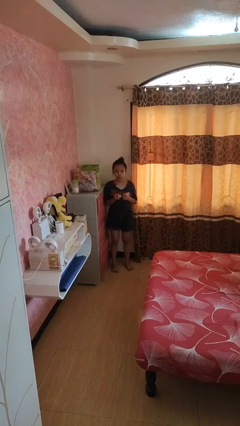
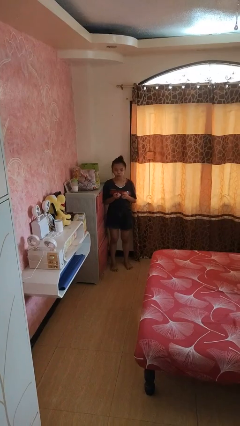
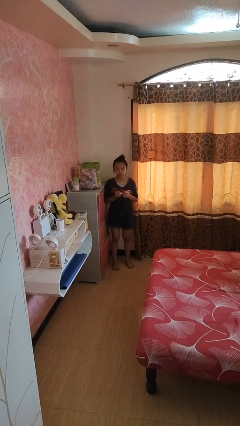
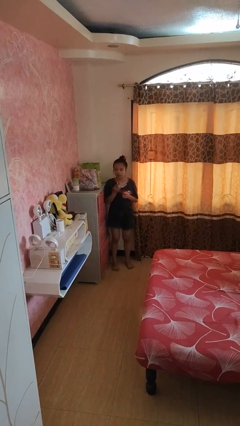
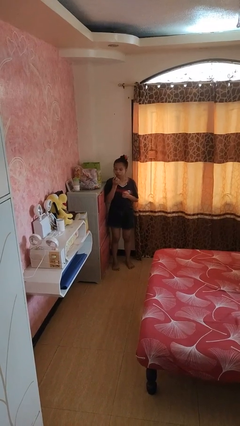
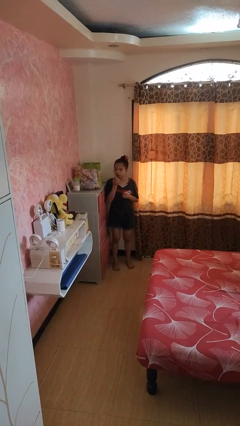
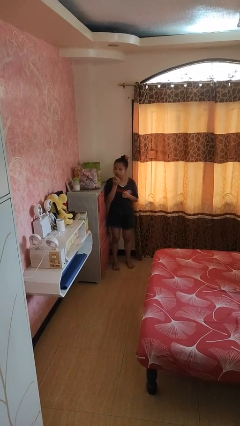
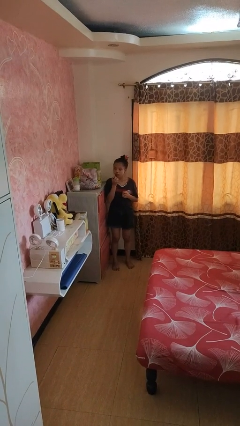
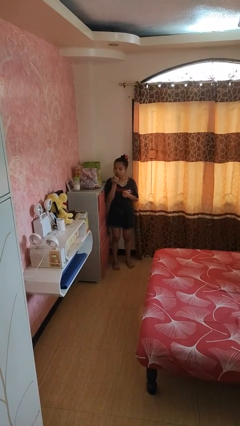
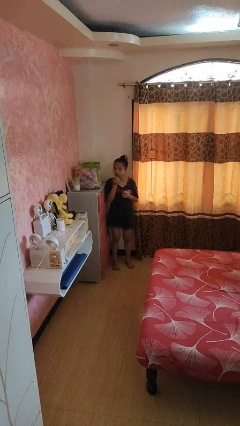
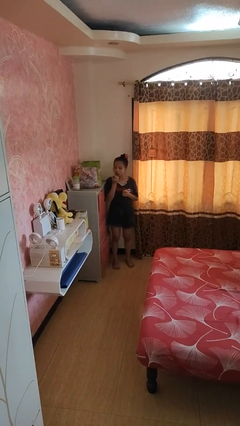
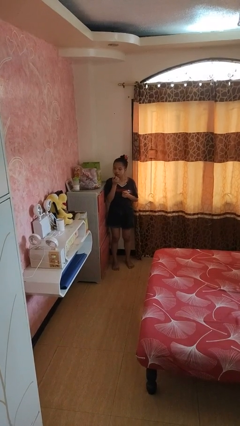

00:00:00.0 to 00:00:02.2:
person applies lip makeup

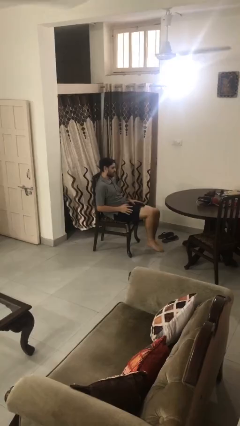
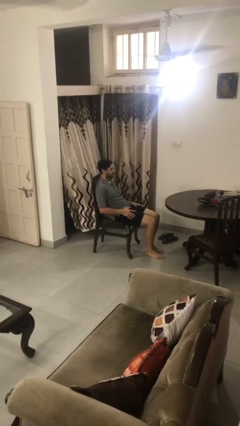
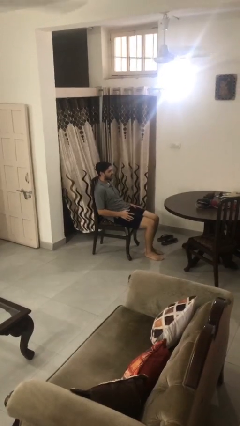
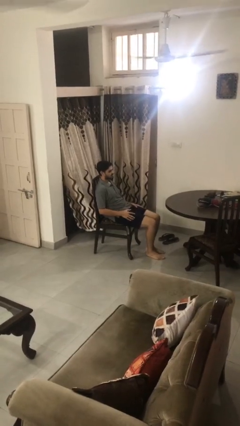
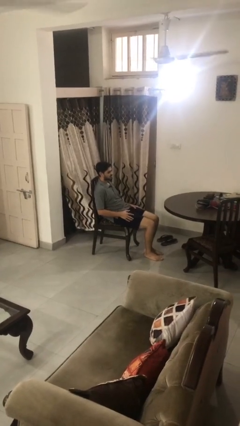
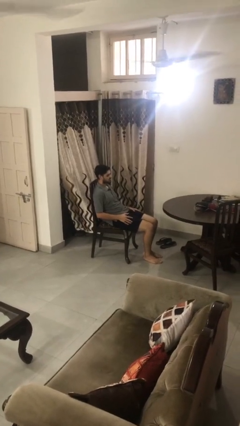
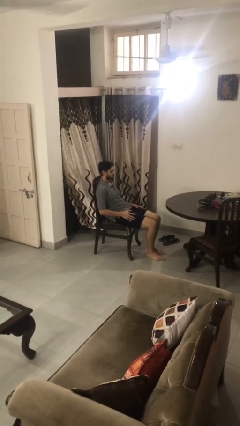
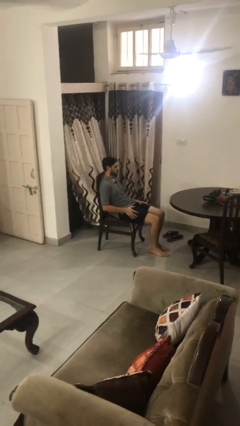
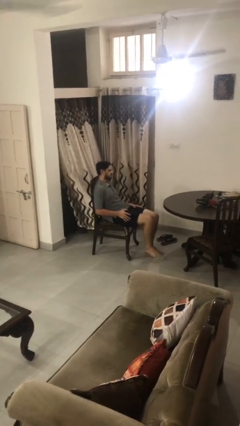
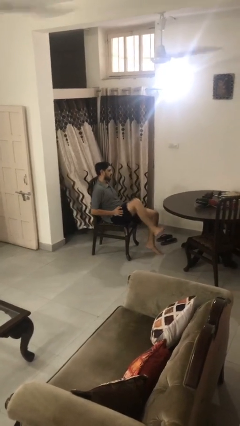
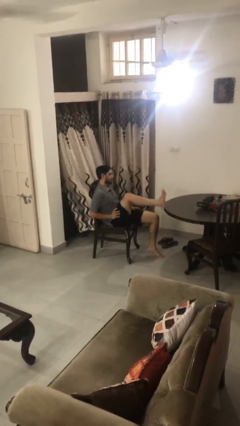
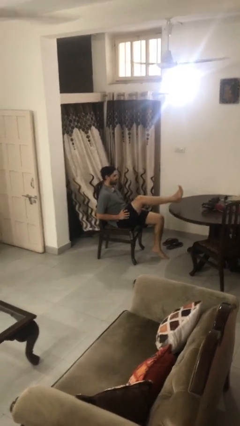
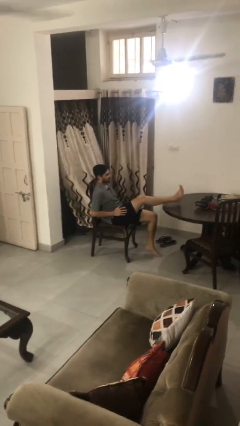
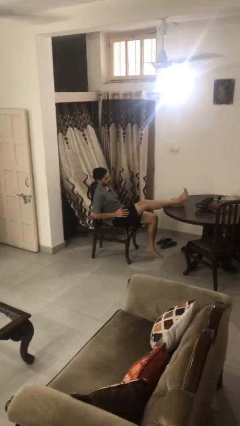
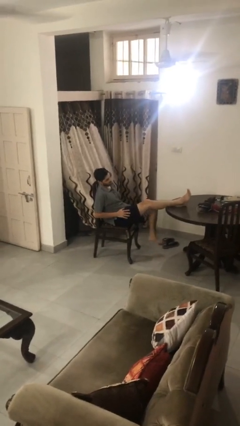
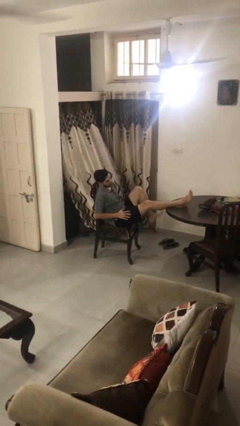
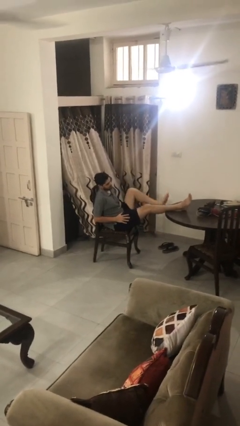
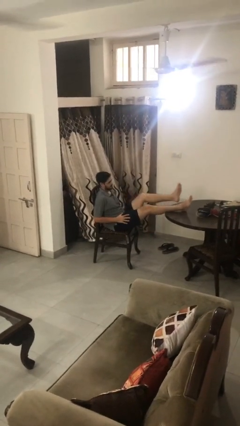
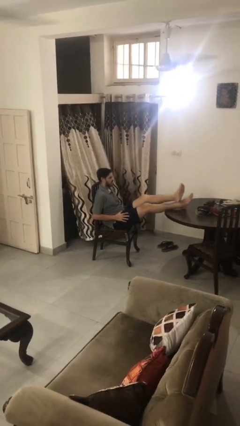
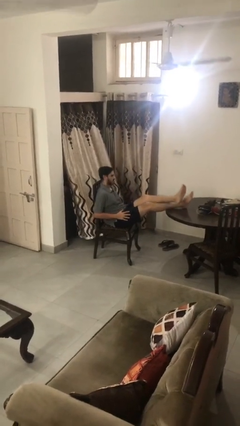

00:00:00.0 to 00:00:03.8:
person puts feet up

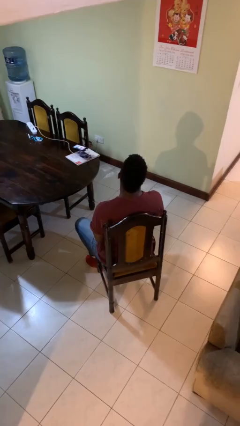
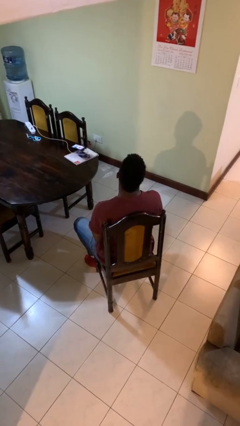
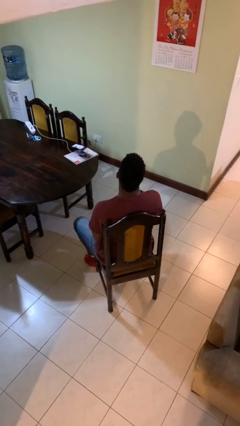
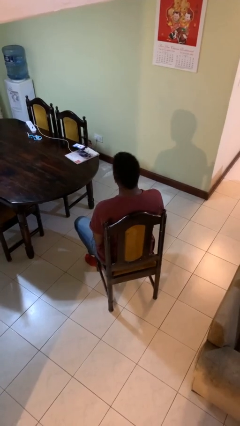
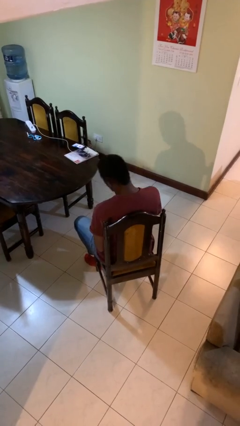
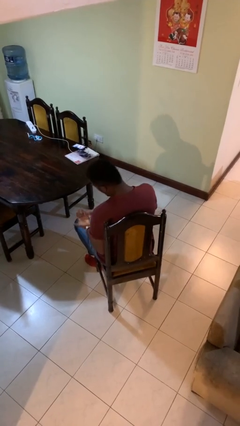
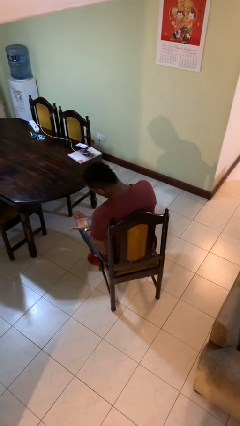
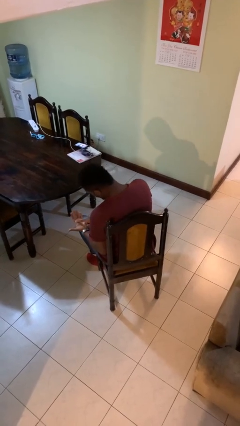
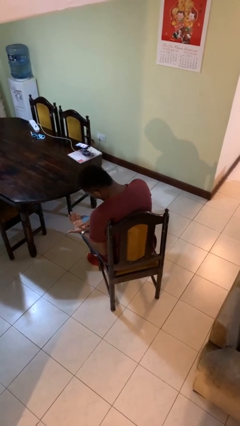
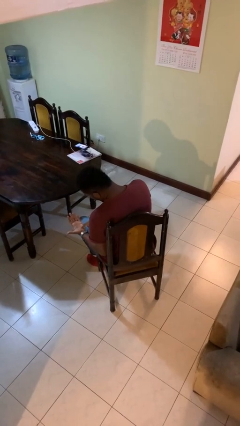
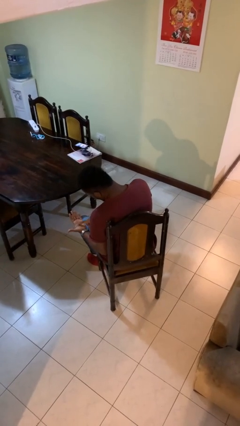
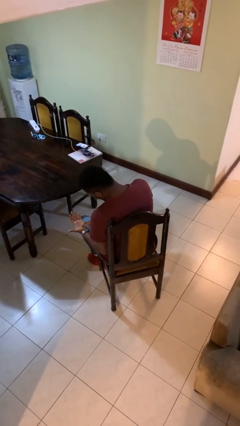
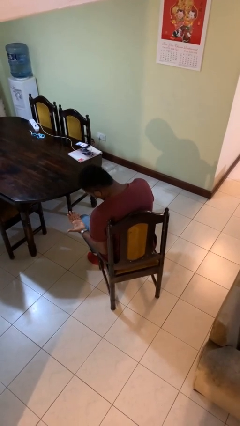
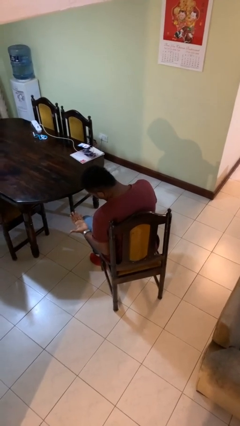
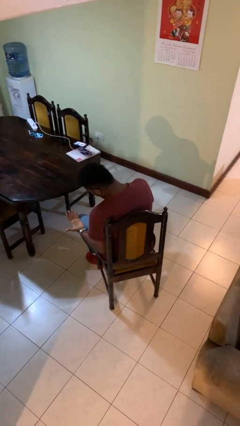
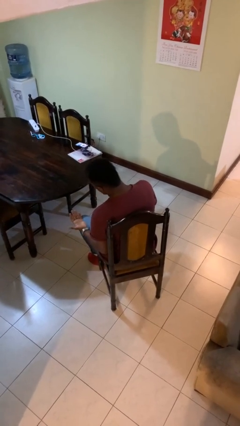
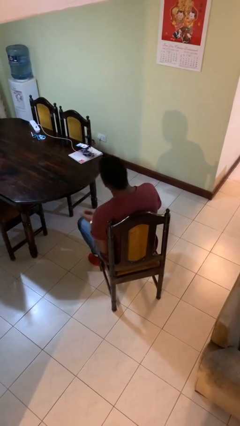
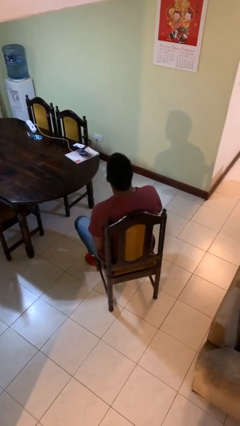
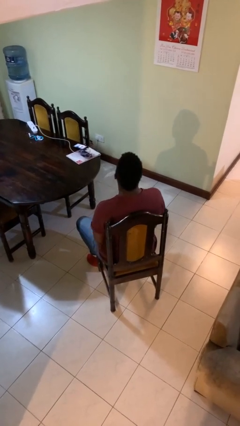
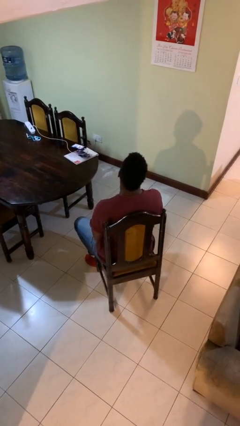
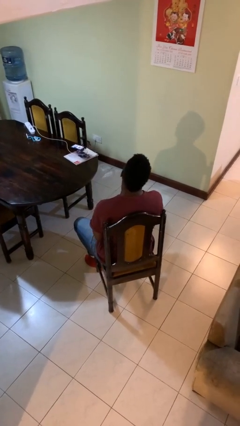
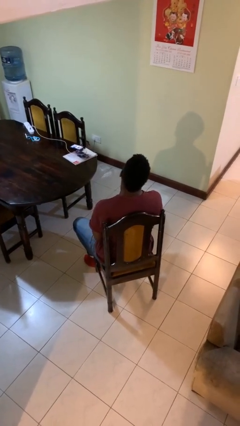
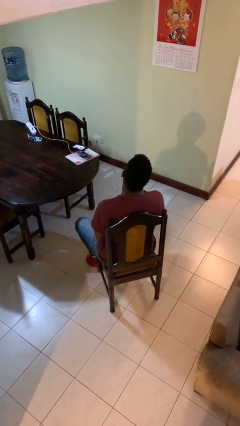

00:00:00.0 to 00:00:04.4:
person looks at hands in lap

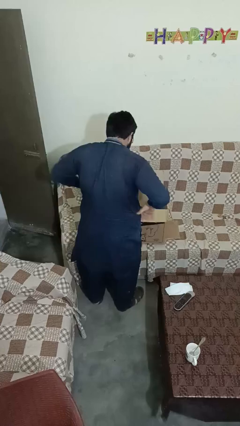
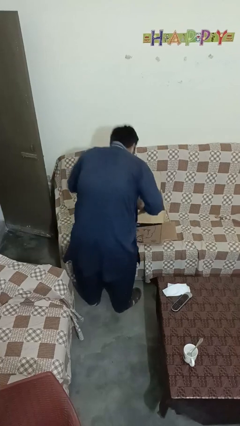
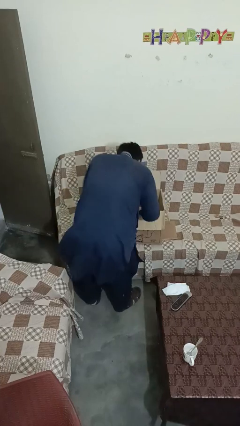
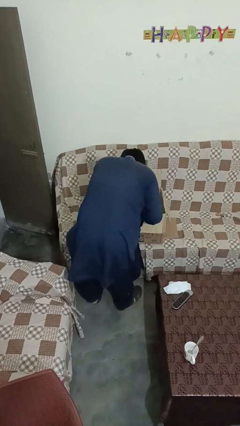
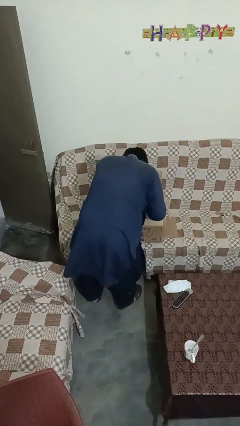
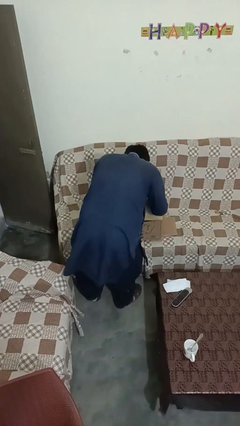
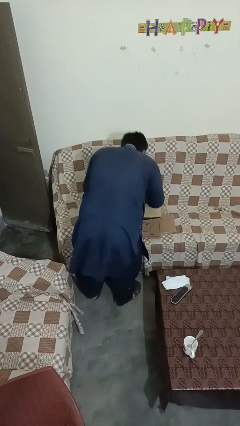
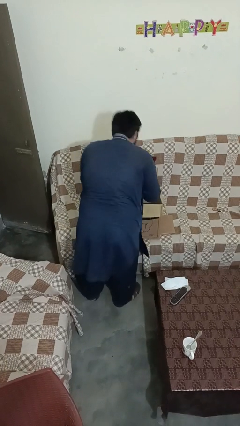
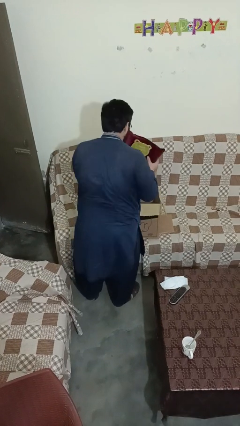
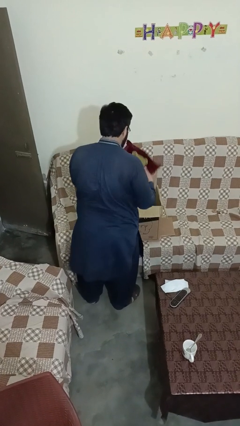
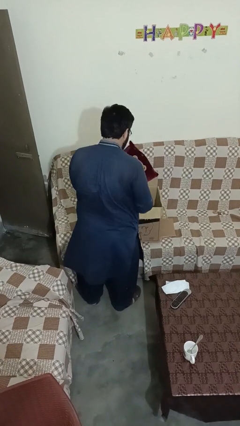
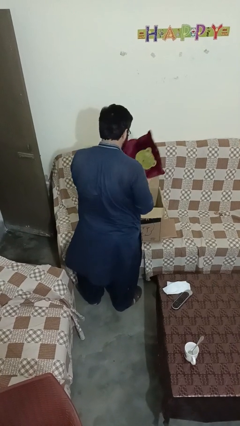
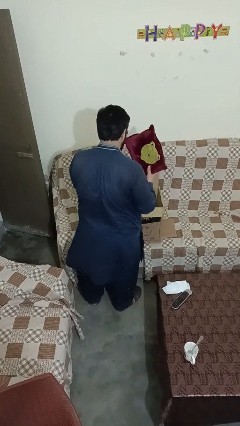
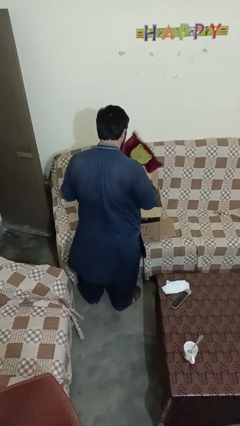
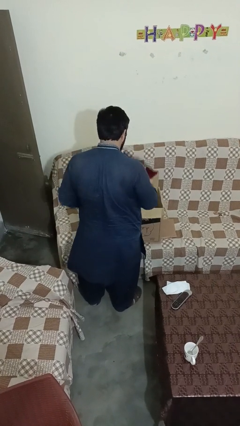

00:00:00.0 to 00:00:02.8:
person searches in box

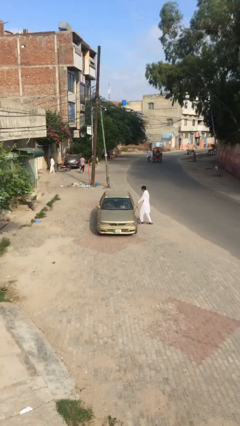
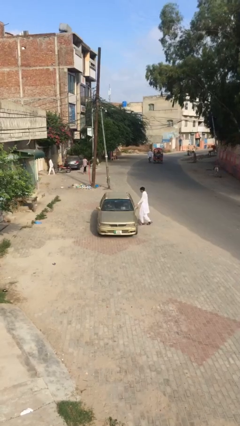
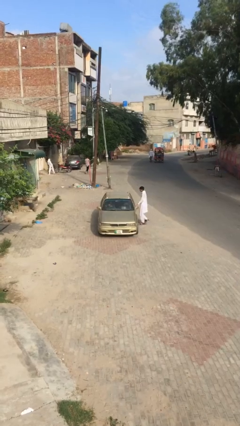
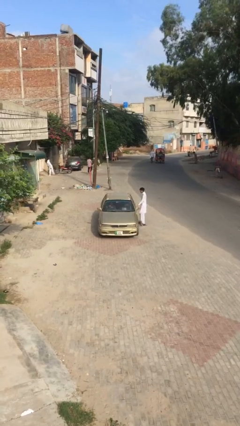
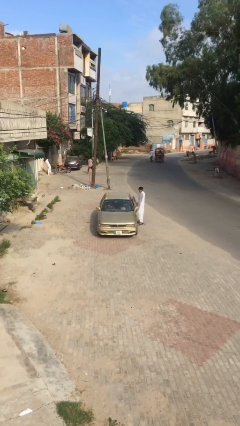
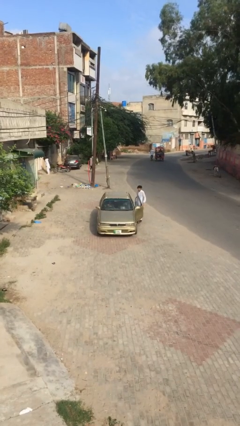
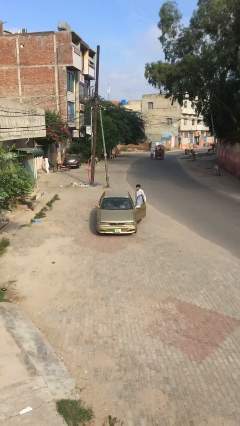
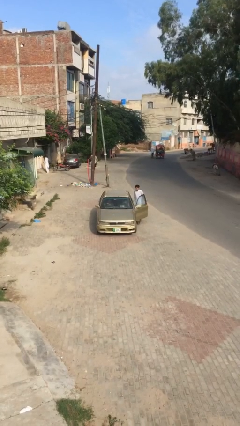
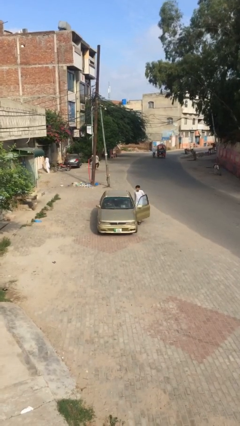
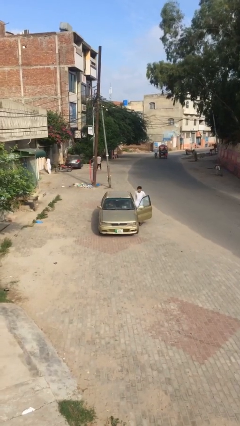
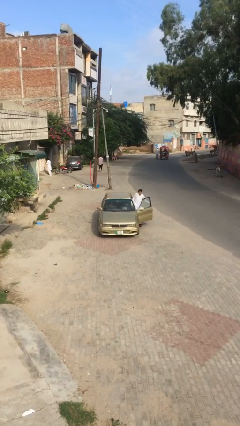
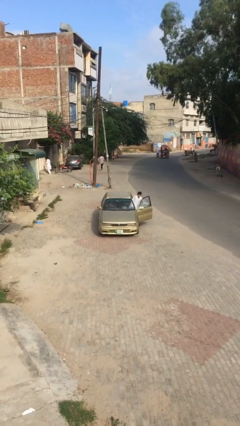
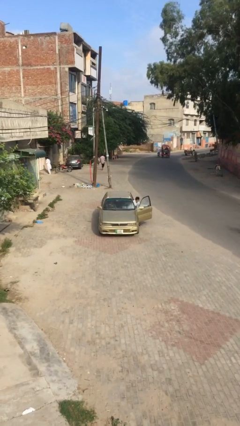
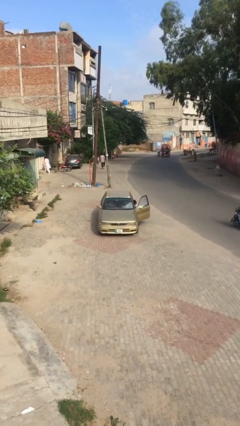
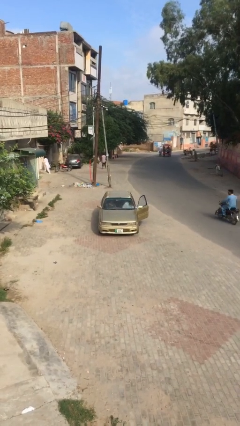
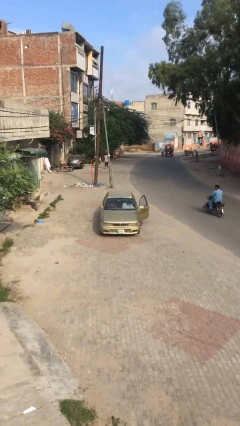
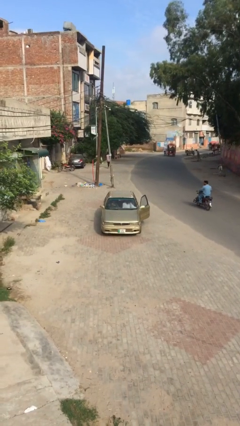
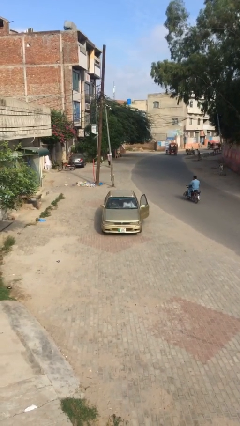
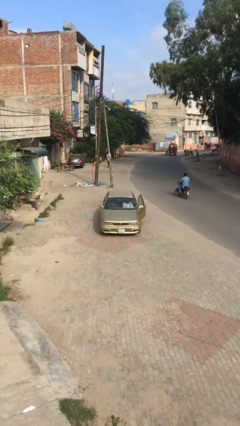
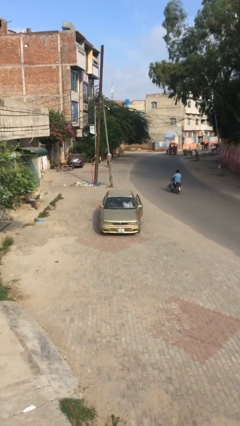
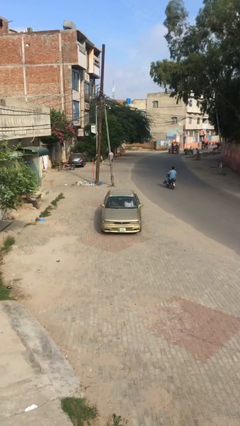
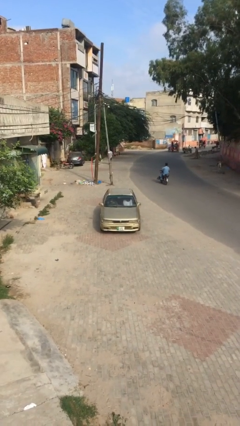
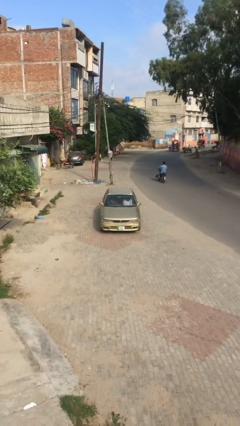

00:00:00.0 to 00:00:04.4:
car picks up person
